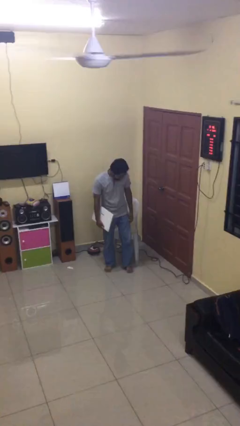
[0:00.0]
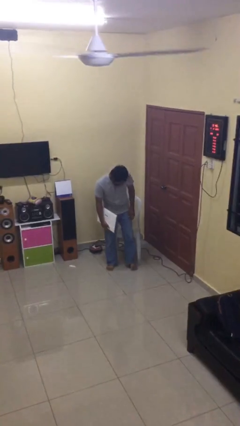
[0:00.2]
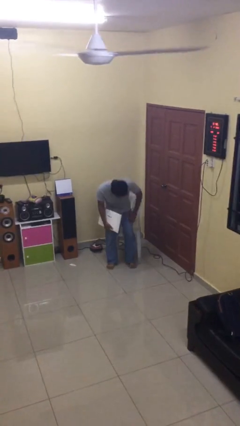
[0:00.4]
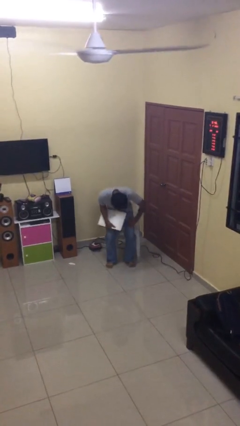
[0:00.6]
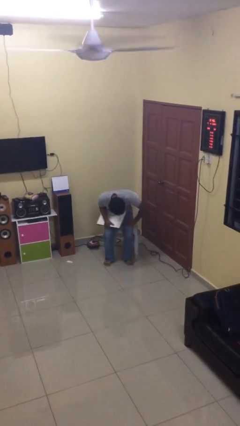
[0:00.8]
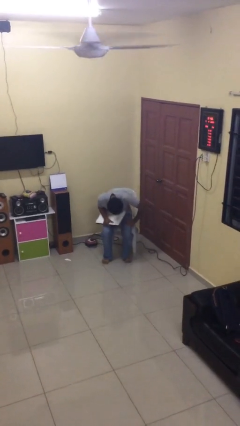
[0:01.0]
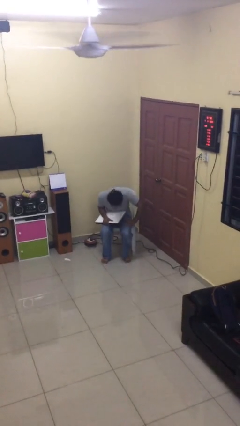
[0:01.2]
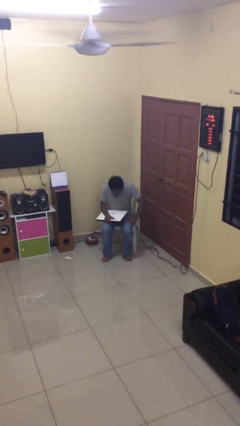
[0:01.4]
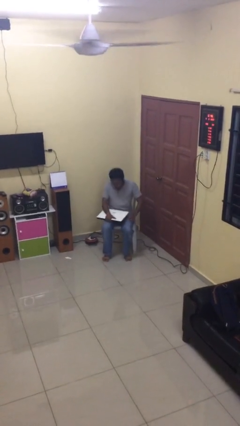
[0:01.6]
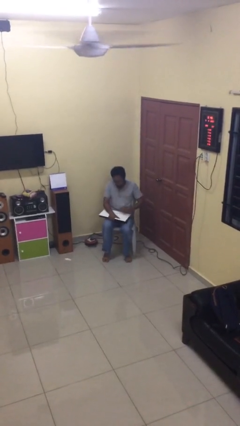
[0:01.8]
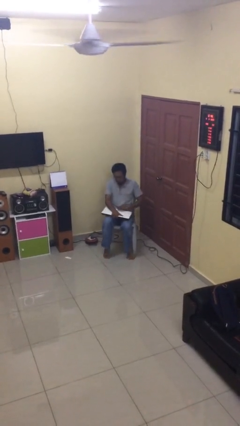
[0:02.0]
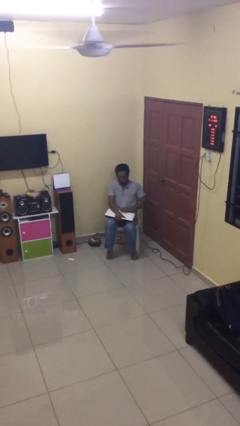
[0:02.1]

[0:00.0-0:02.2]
person sits down

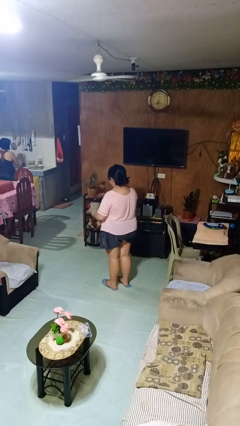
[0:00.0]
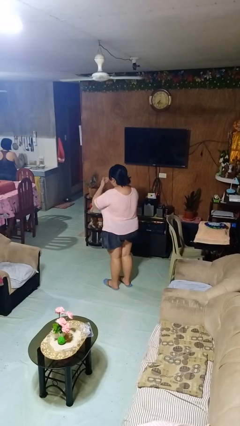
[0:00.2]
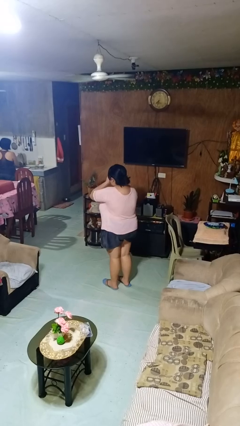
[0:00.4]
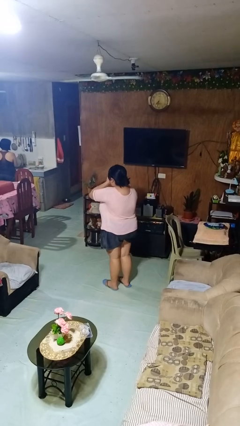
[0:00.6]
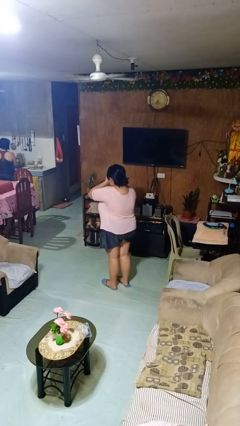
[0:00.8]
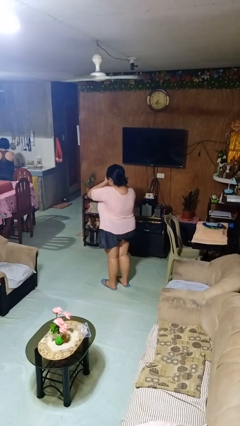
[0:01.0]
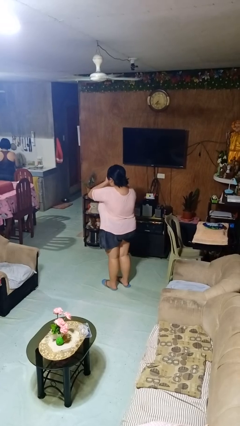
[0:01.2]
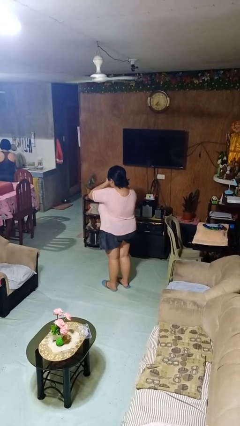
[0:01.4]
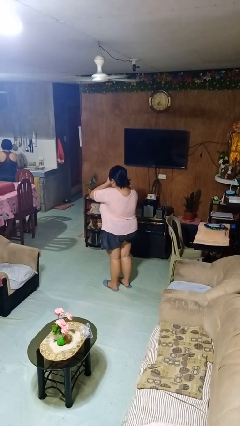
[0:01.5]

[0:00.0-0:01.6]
person yawns

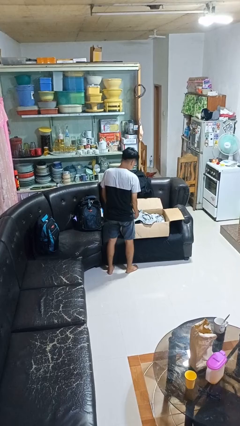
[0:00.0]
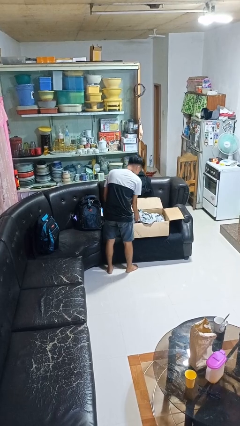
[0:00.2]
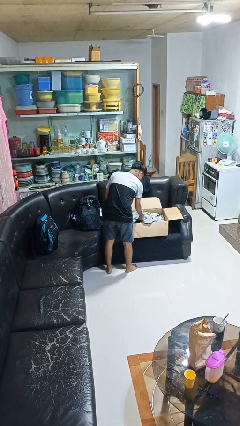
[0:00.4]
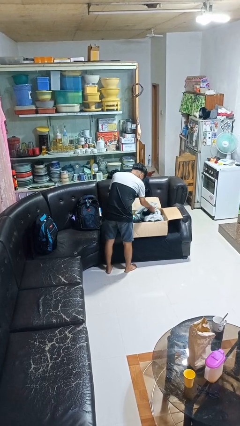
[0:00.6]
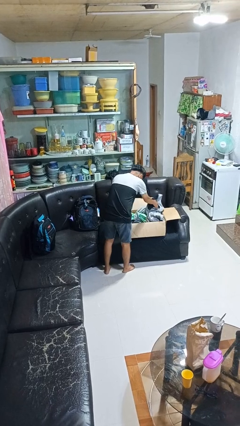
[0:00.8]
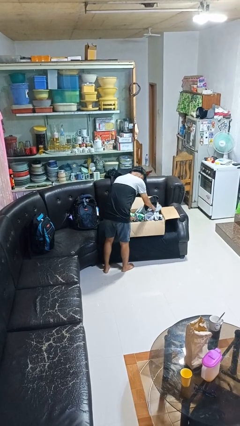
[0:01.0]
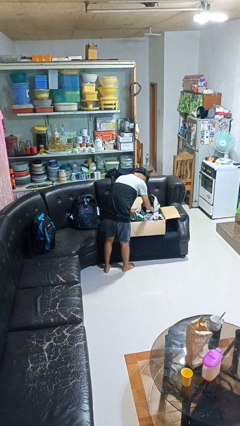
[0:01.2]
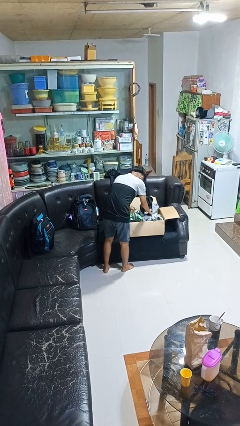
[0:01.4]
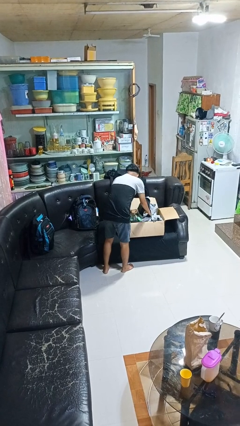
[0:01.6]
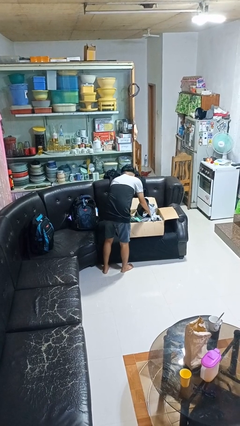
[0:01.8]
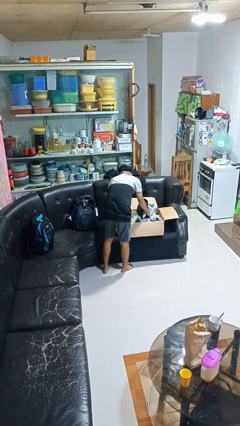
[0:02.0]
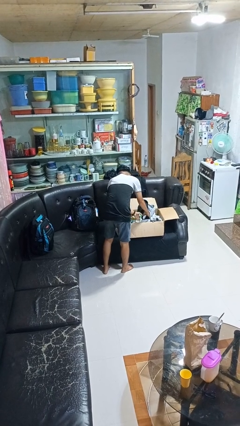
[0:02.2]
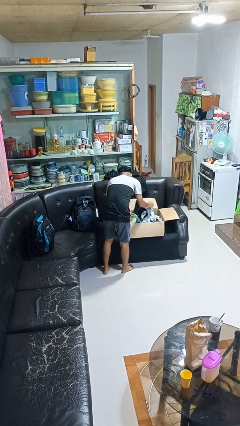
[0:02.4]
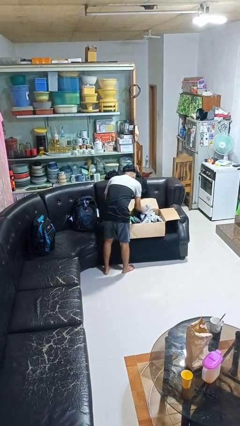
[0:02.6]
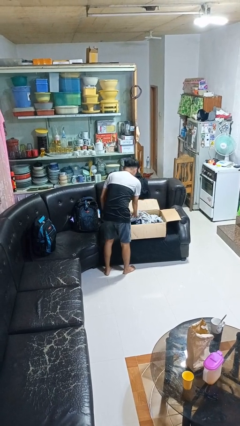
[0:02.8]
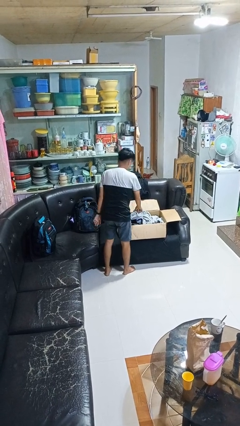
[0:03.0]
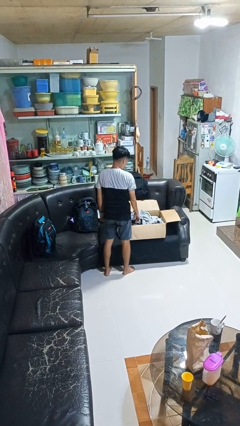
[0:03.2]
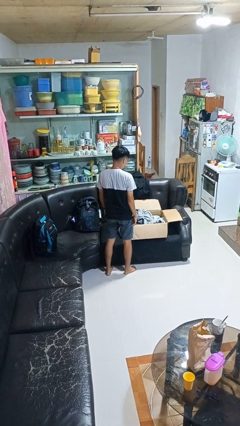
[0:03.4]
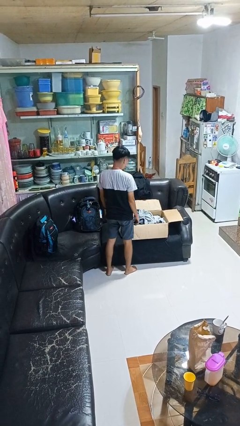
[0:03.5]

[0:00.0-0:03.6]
person searches in box

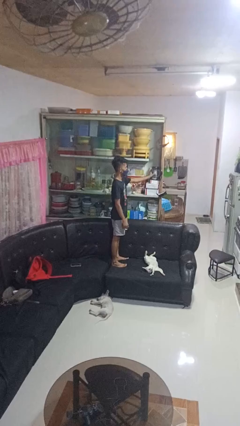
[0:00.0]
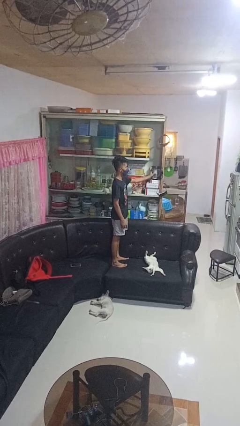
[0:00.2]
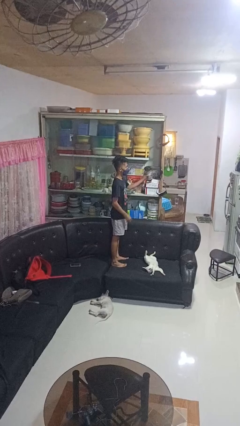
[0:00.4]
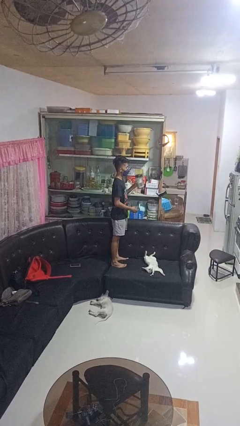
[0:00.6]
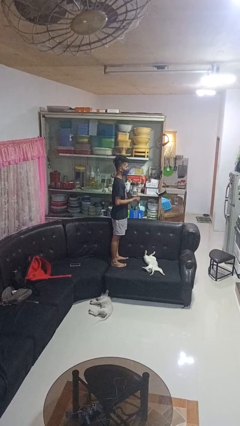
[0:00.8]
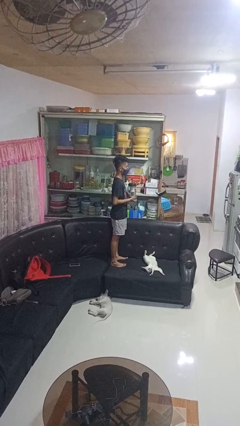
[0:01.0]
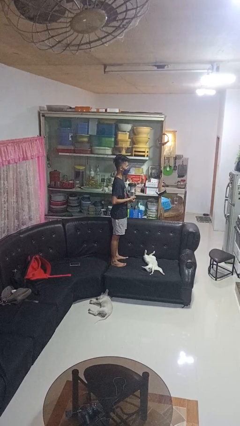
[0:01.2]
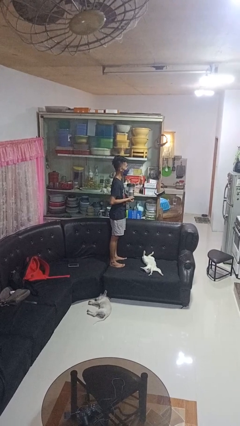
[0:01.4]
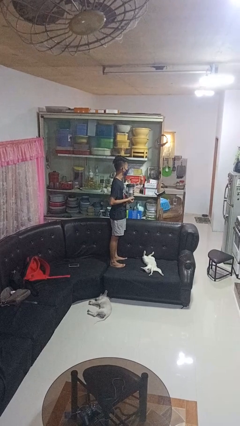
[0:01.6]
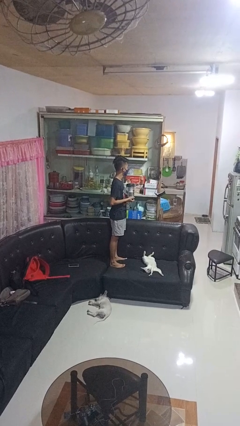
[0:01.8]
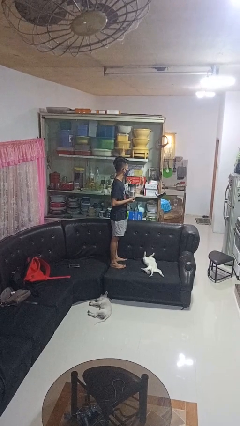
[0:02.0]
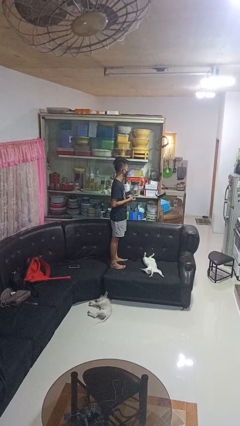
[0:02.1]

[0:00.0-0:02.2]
person picks up object from cabinet

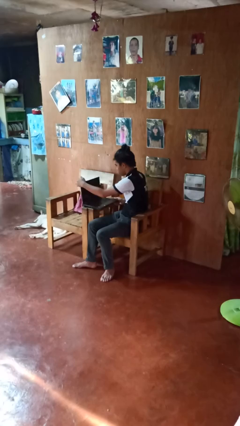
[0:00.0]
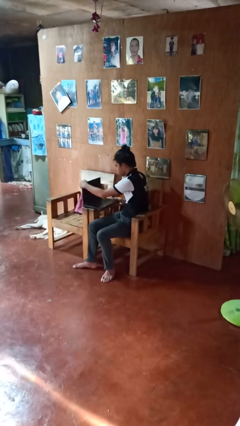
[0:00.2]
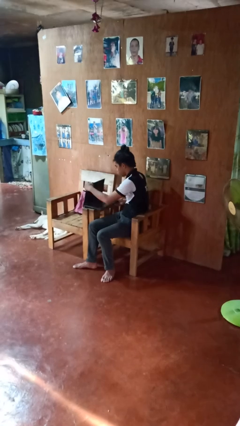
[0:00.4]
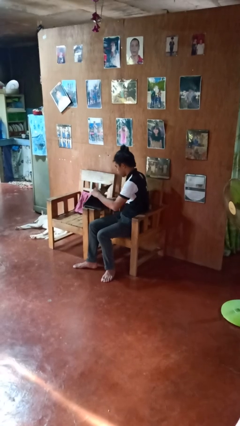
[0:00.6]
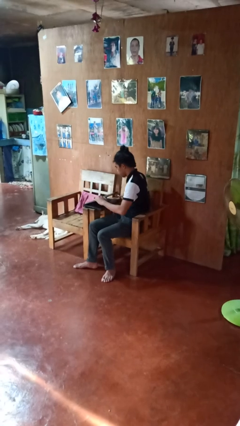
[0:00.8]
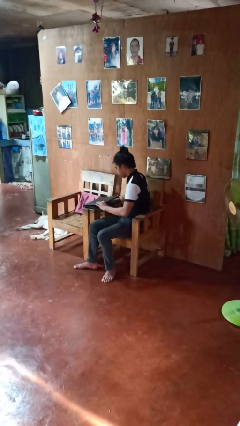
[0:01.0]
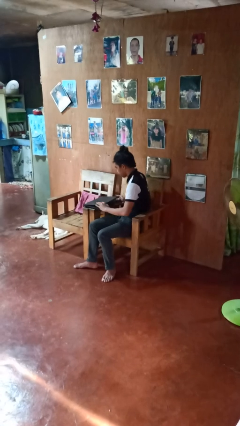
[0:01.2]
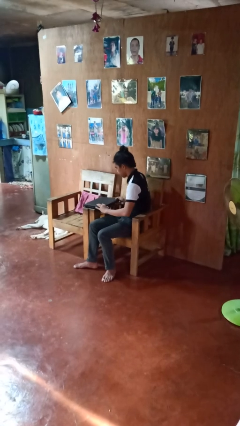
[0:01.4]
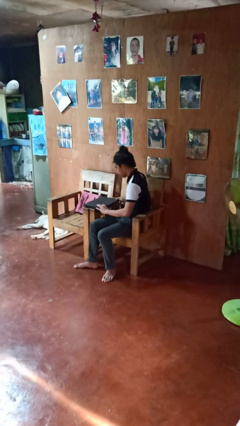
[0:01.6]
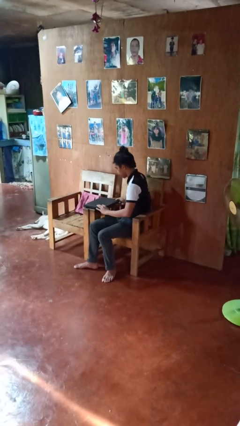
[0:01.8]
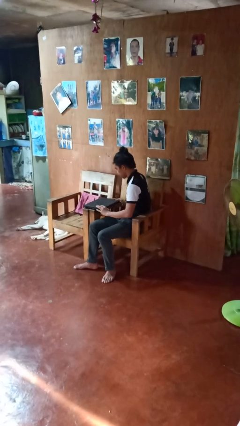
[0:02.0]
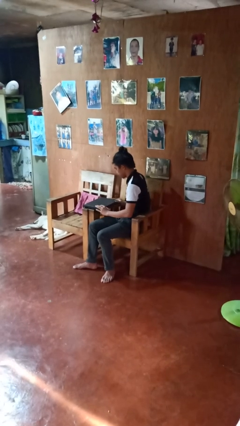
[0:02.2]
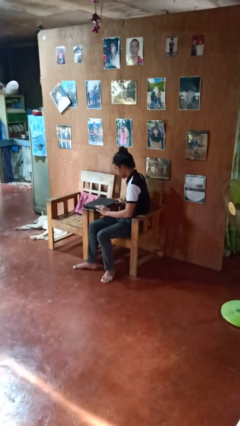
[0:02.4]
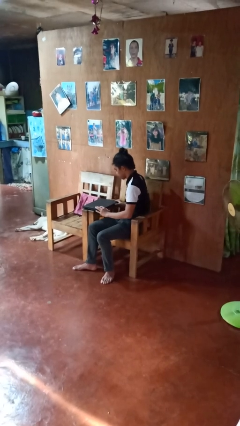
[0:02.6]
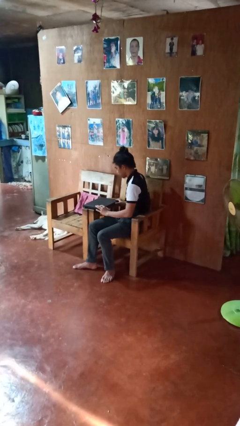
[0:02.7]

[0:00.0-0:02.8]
person closes laptop

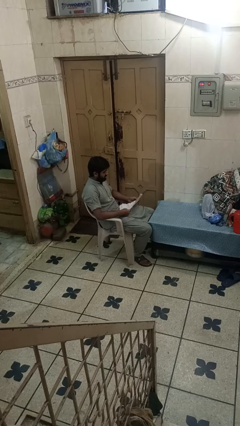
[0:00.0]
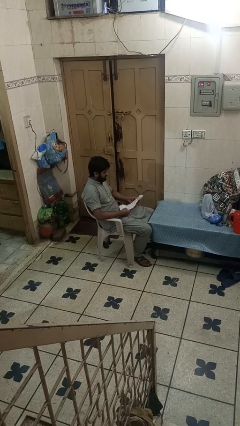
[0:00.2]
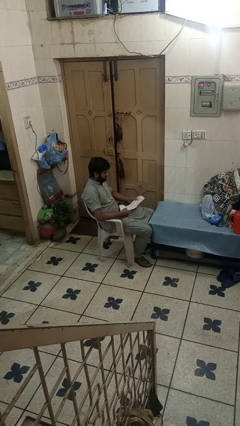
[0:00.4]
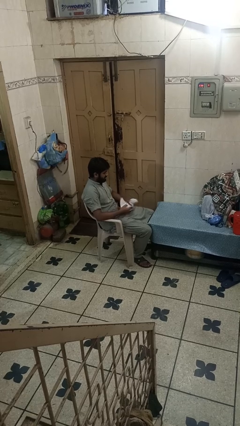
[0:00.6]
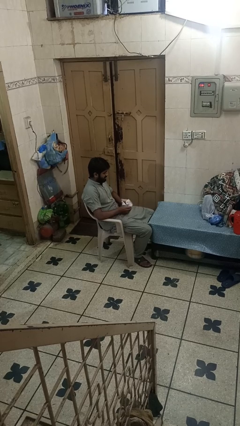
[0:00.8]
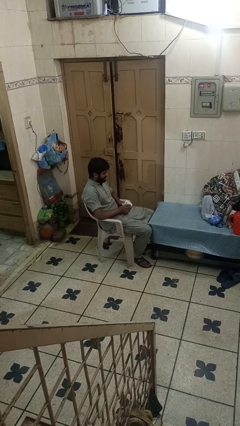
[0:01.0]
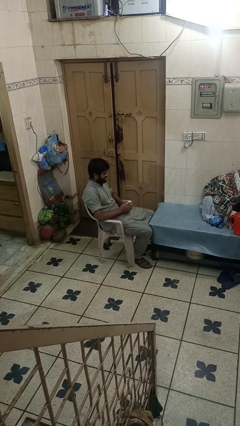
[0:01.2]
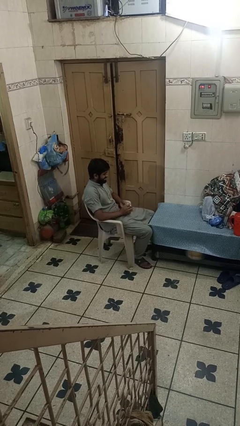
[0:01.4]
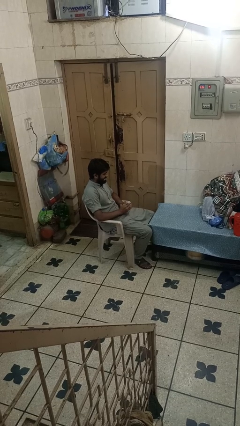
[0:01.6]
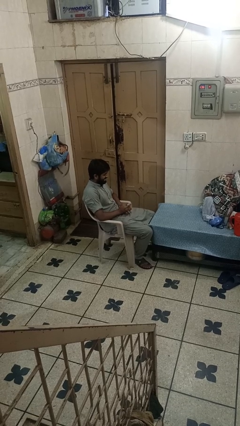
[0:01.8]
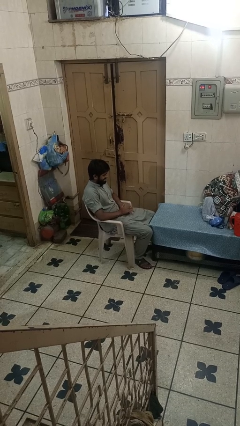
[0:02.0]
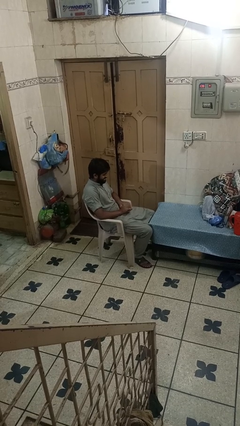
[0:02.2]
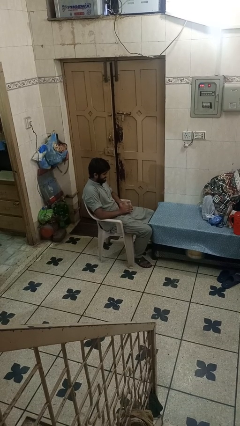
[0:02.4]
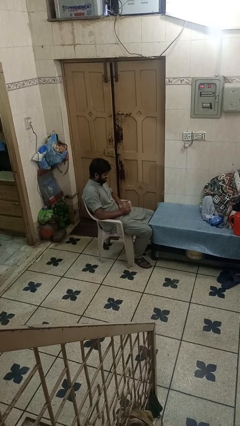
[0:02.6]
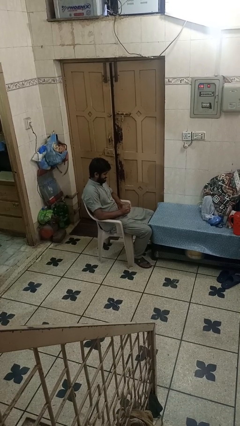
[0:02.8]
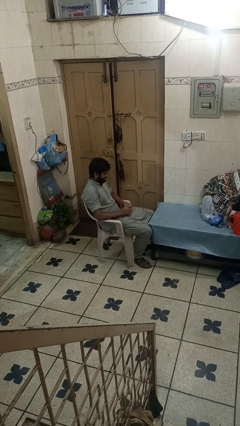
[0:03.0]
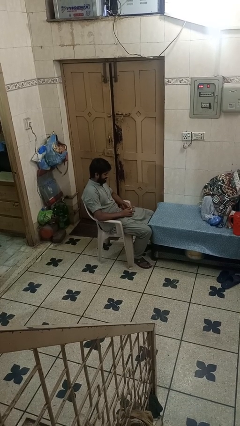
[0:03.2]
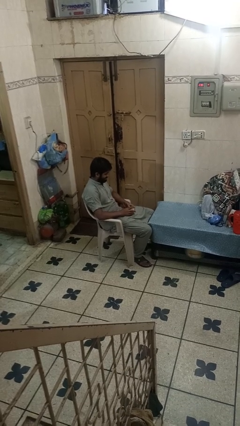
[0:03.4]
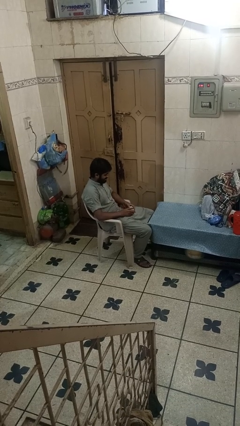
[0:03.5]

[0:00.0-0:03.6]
person crumples paper

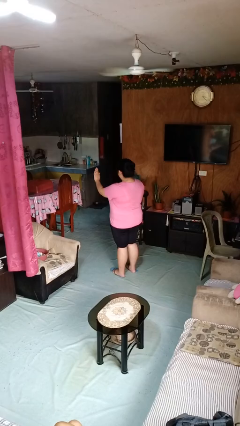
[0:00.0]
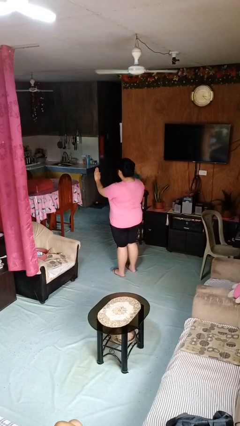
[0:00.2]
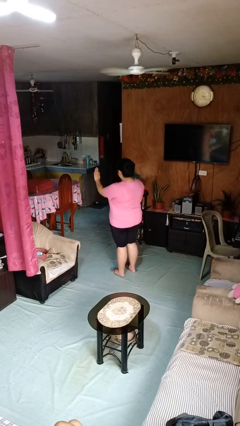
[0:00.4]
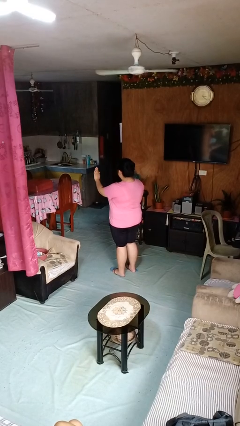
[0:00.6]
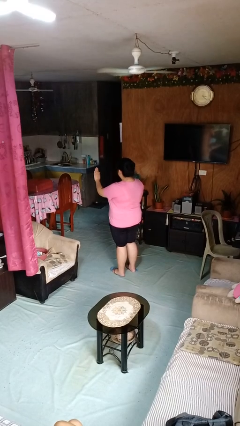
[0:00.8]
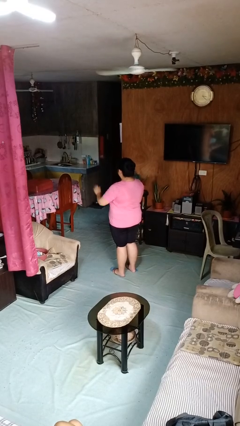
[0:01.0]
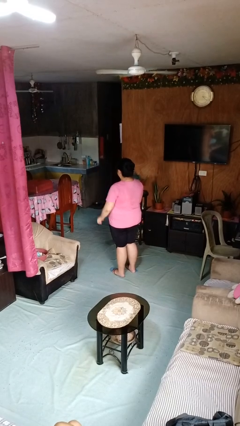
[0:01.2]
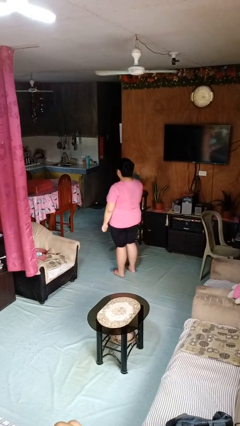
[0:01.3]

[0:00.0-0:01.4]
person gestures stop
